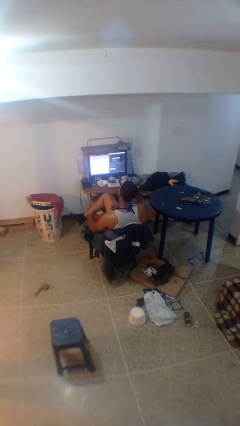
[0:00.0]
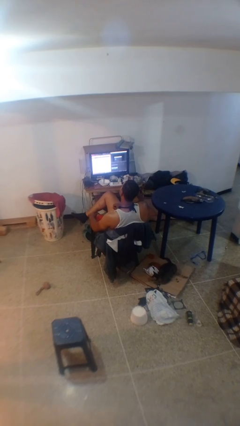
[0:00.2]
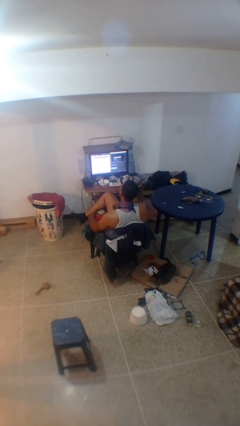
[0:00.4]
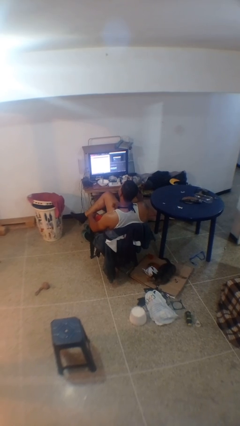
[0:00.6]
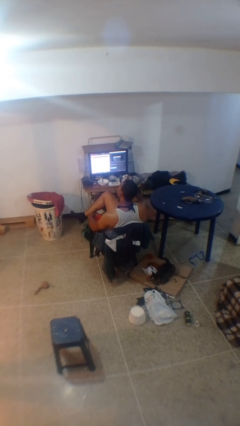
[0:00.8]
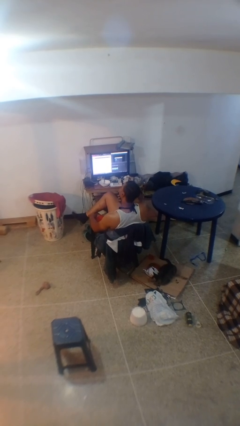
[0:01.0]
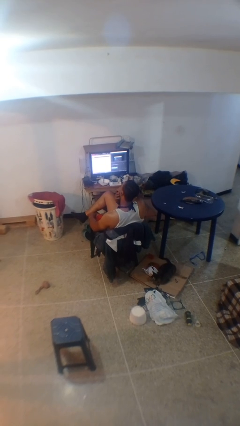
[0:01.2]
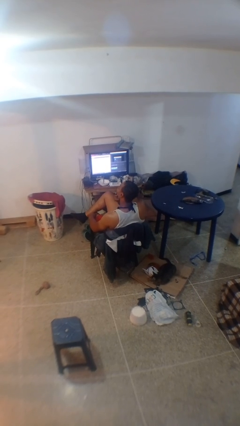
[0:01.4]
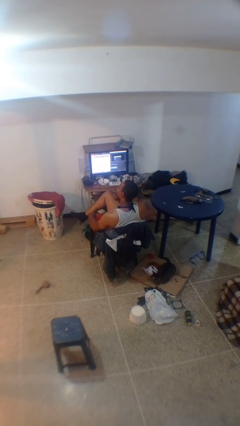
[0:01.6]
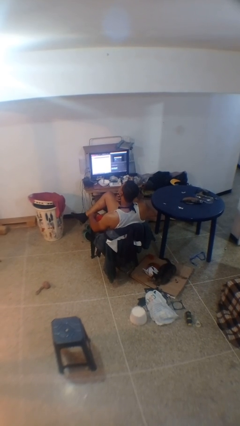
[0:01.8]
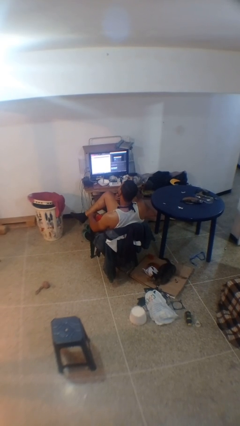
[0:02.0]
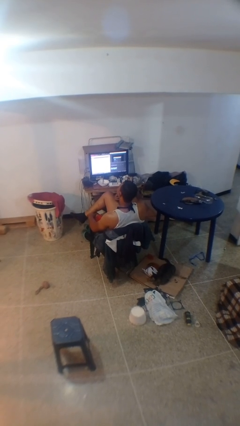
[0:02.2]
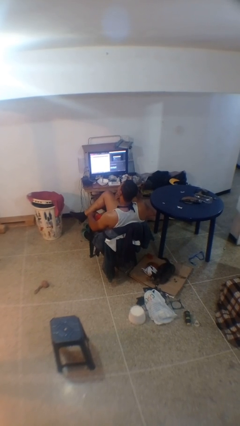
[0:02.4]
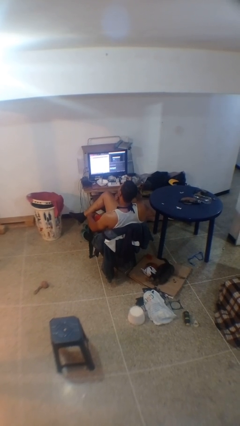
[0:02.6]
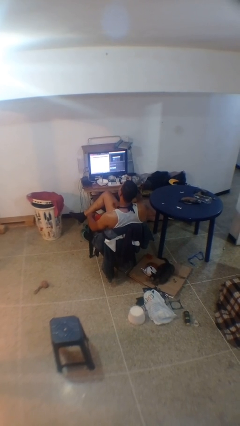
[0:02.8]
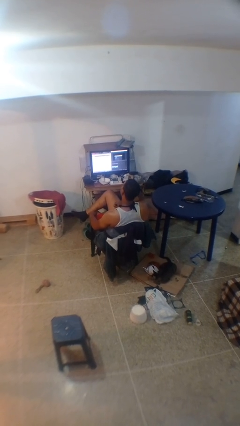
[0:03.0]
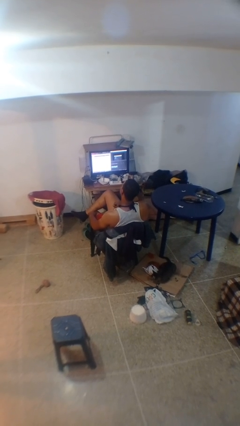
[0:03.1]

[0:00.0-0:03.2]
person strokes chin

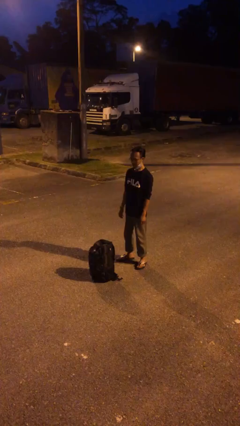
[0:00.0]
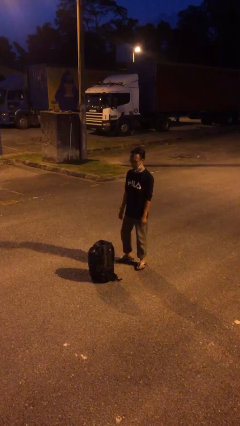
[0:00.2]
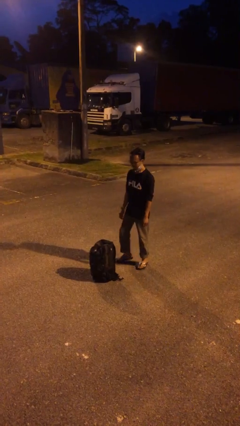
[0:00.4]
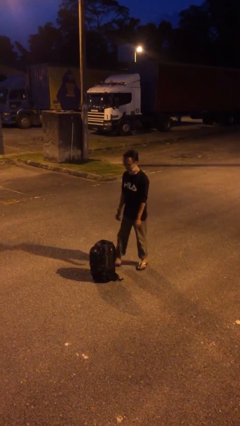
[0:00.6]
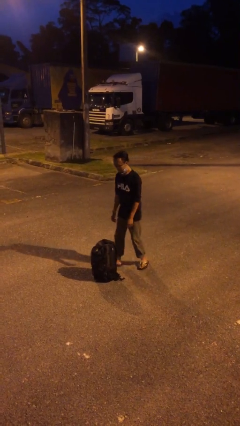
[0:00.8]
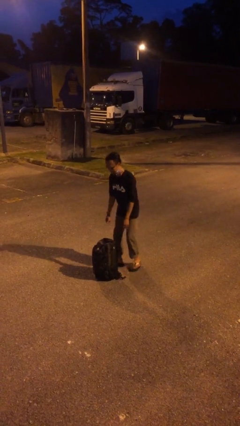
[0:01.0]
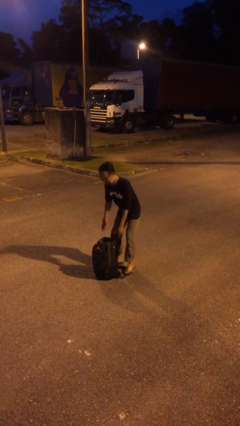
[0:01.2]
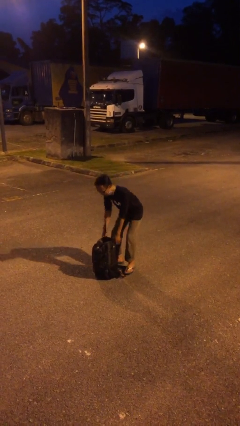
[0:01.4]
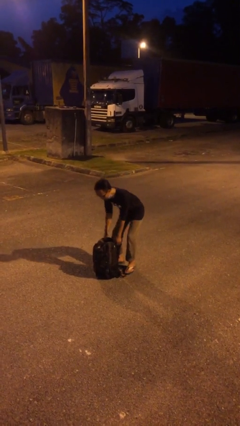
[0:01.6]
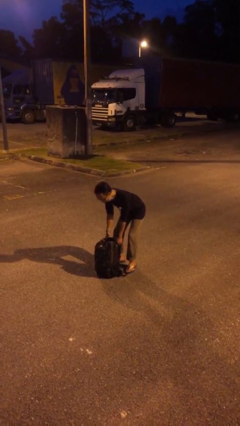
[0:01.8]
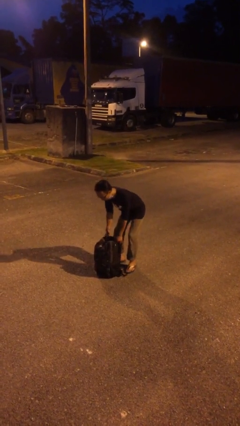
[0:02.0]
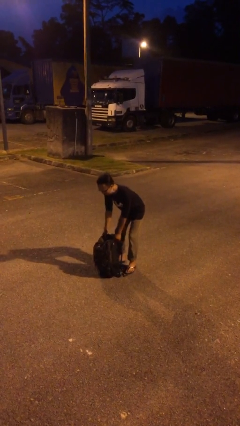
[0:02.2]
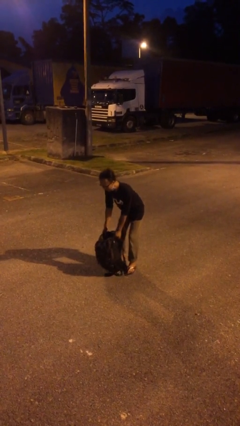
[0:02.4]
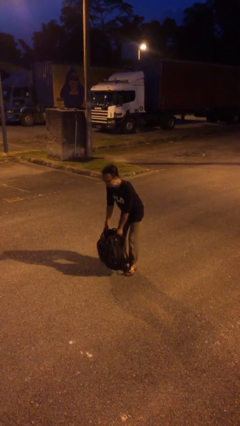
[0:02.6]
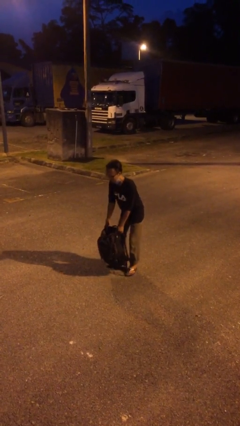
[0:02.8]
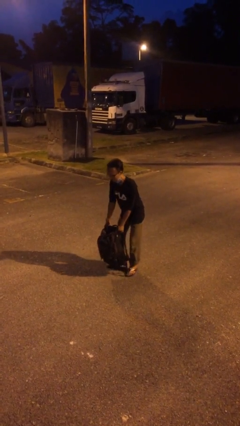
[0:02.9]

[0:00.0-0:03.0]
person picks up object from floor

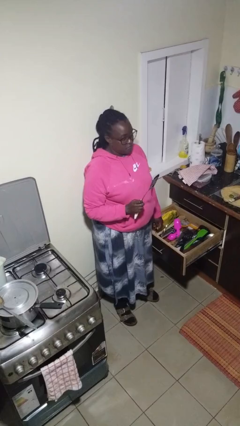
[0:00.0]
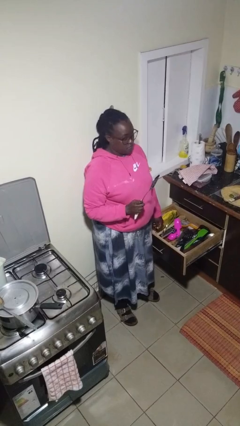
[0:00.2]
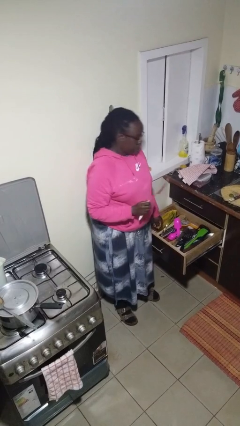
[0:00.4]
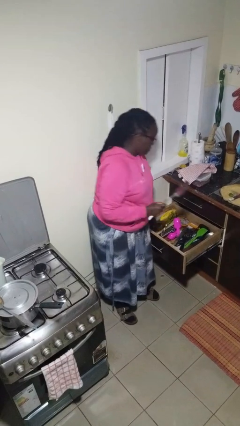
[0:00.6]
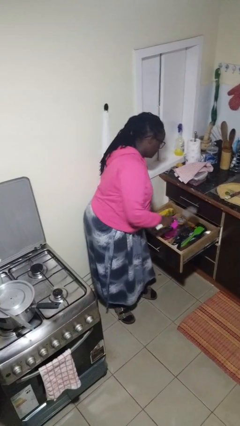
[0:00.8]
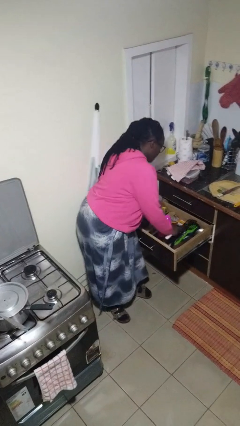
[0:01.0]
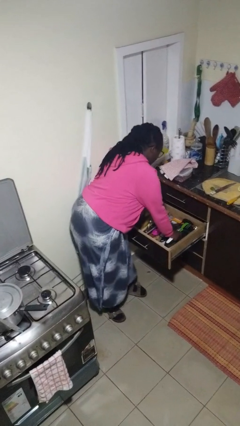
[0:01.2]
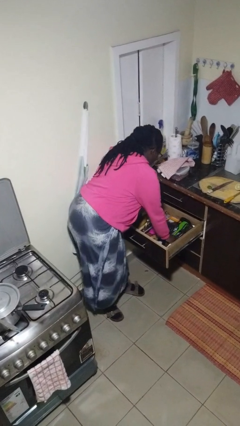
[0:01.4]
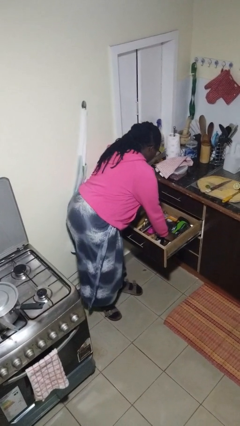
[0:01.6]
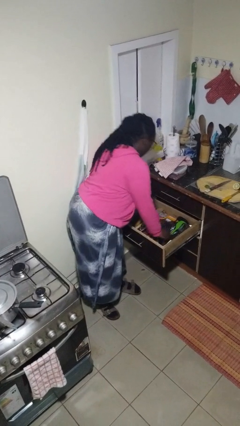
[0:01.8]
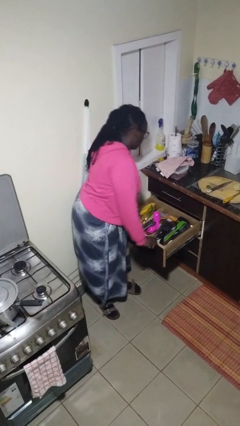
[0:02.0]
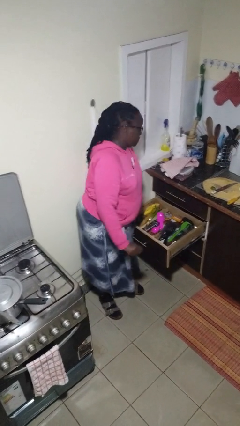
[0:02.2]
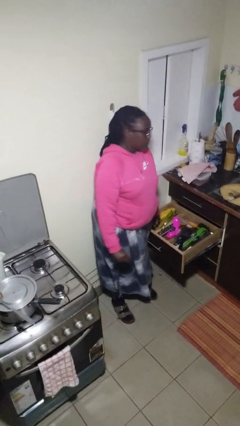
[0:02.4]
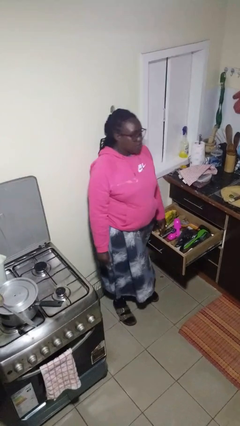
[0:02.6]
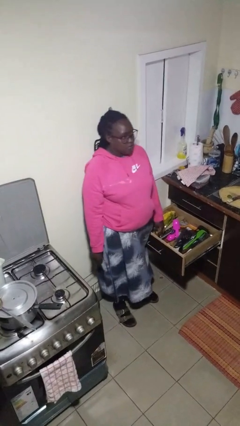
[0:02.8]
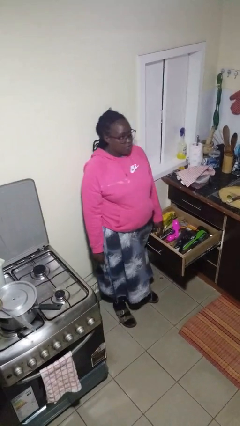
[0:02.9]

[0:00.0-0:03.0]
person puts object into kitchen drawer

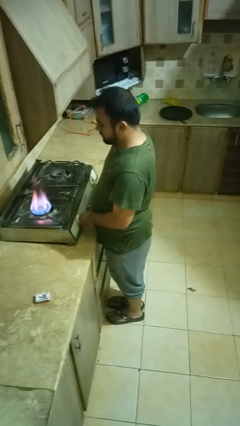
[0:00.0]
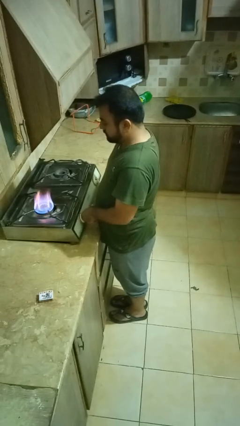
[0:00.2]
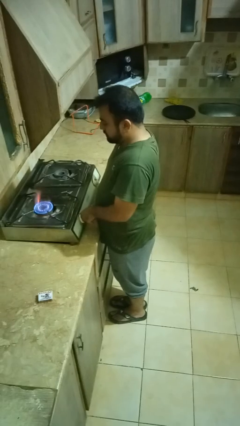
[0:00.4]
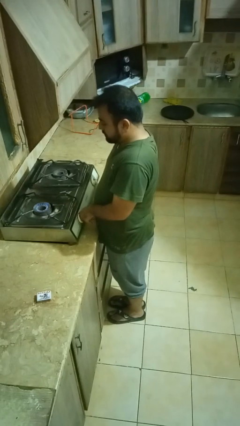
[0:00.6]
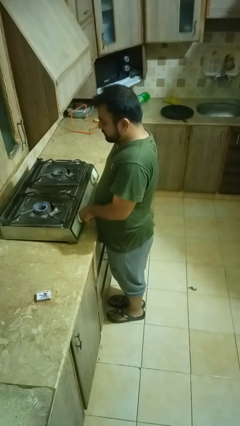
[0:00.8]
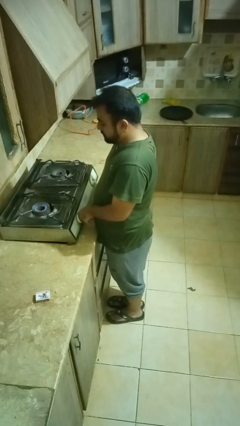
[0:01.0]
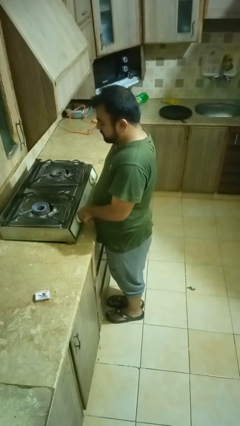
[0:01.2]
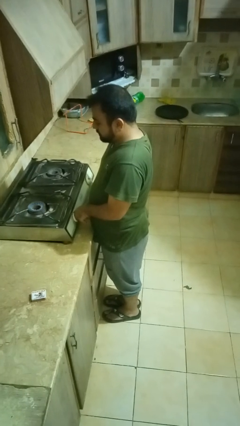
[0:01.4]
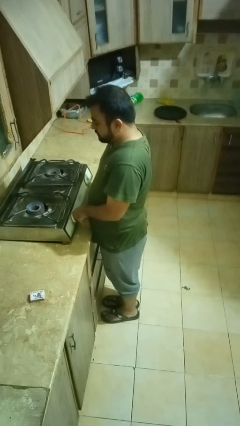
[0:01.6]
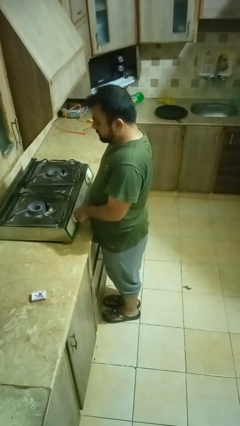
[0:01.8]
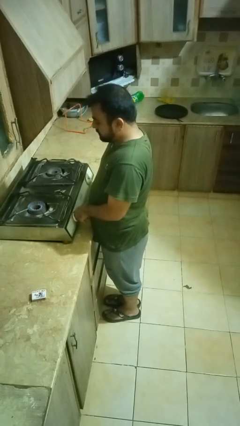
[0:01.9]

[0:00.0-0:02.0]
person turns off stovetop

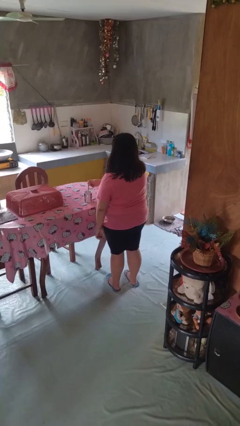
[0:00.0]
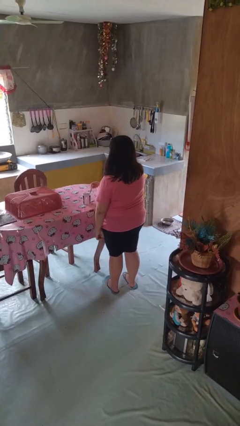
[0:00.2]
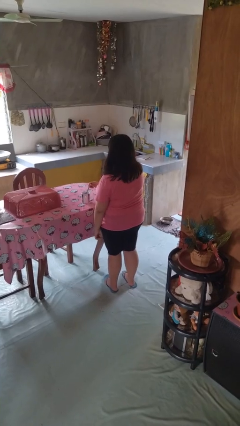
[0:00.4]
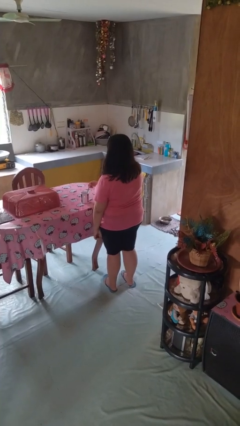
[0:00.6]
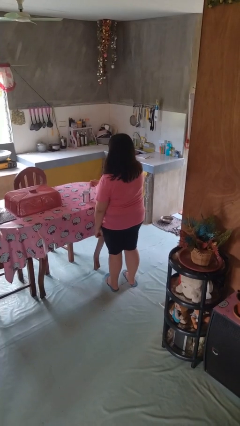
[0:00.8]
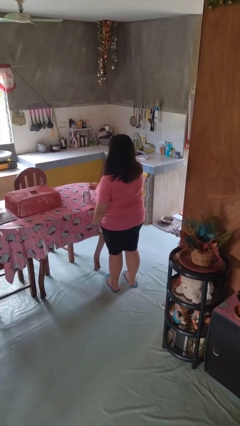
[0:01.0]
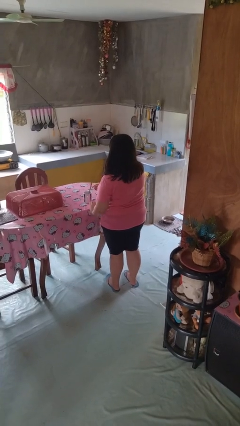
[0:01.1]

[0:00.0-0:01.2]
person stirs mug

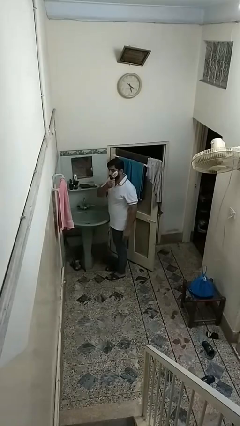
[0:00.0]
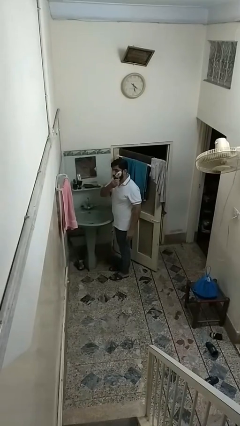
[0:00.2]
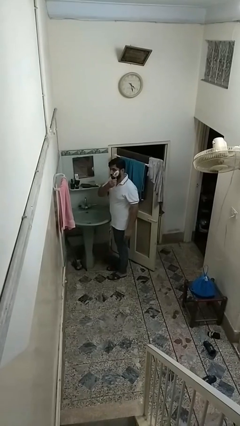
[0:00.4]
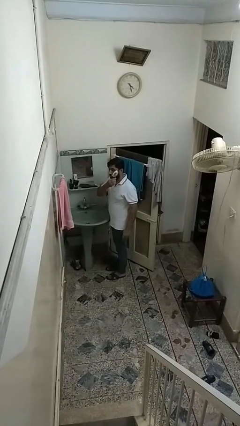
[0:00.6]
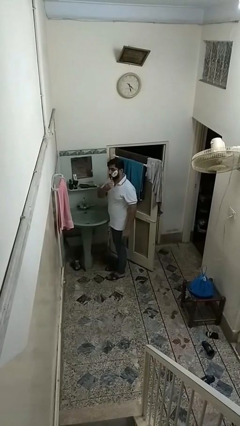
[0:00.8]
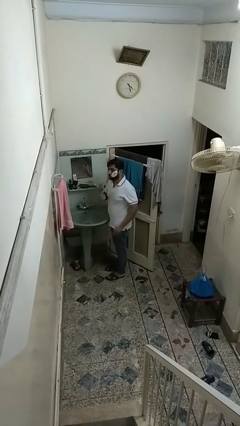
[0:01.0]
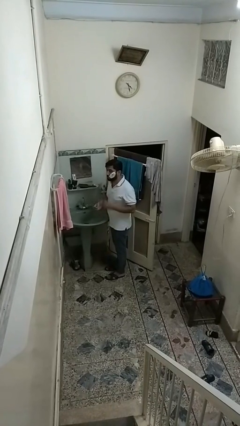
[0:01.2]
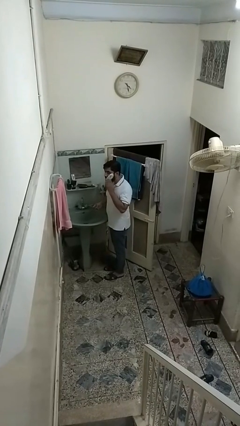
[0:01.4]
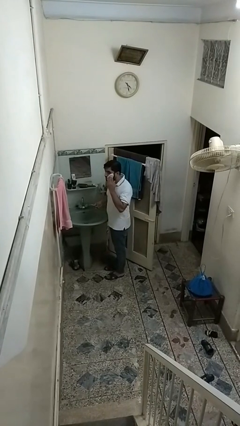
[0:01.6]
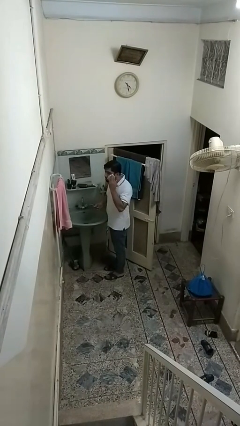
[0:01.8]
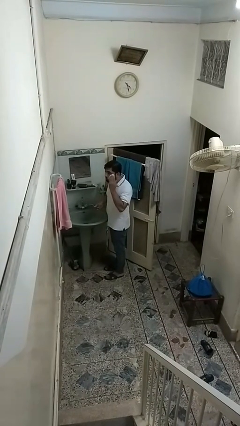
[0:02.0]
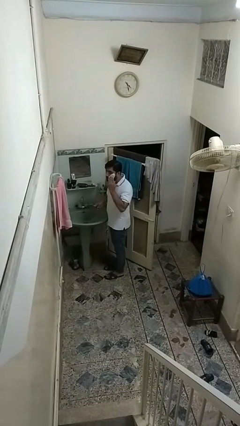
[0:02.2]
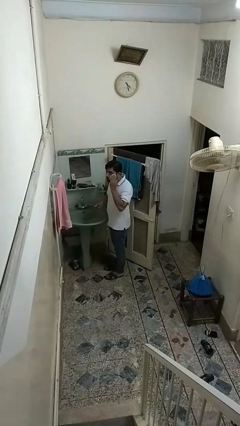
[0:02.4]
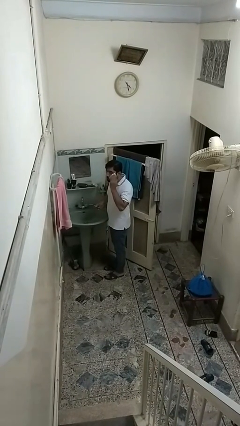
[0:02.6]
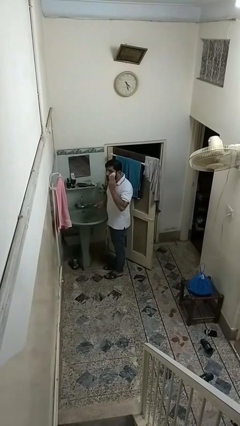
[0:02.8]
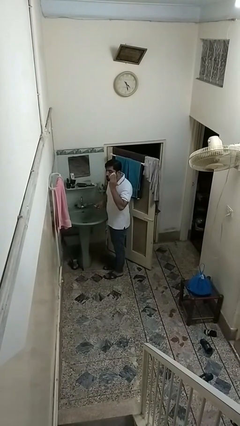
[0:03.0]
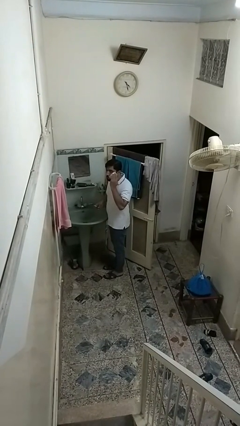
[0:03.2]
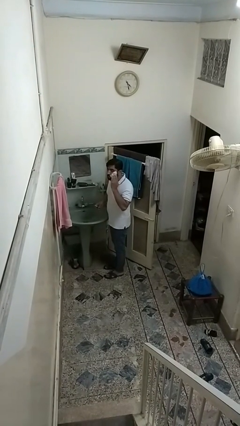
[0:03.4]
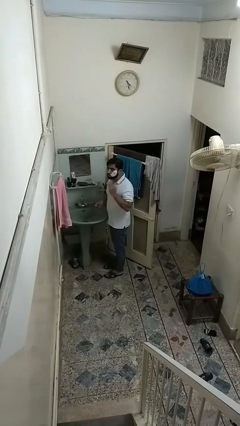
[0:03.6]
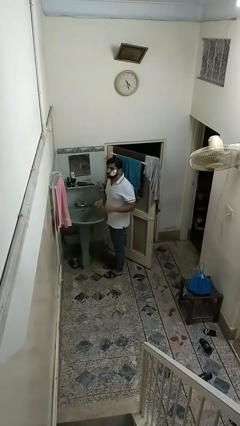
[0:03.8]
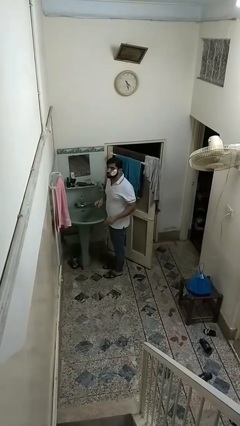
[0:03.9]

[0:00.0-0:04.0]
person applies shaving cream

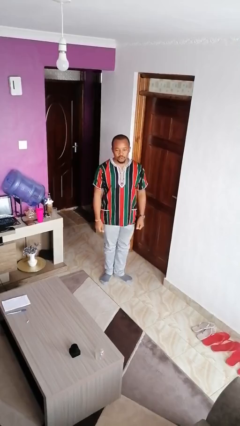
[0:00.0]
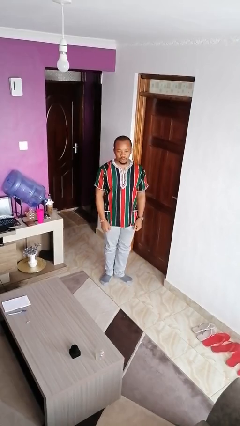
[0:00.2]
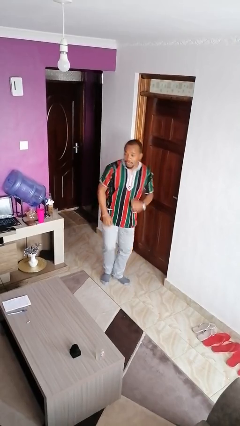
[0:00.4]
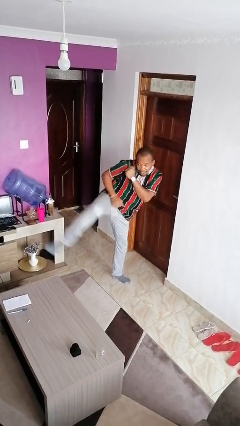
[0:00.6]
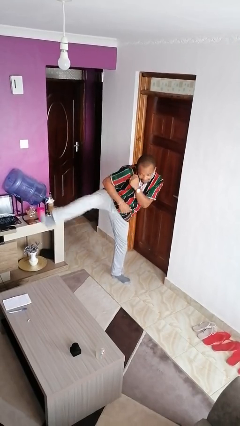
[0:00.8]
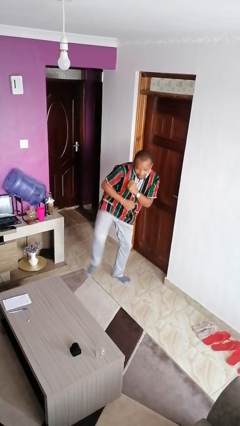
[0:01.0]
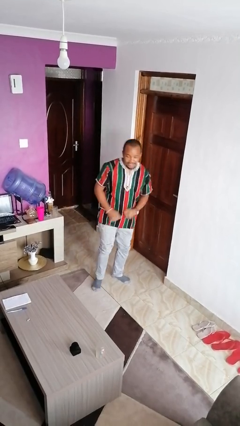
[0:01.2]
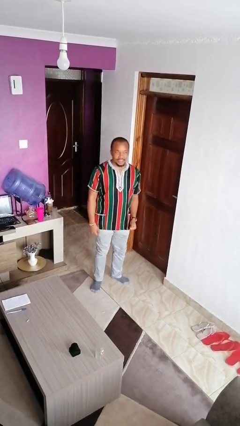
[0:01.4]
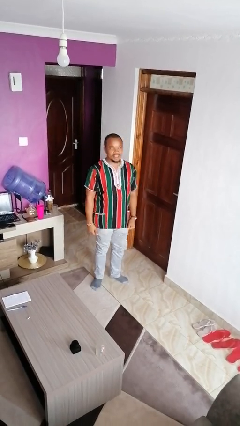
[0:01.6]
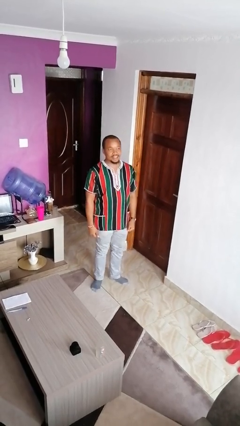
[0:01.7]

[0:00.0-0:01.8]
person karate kicks
